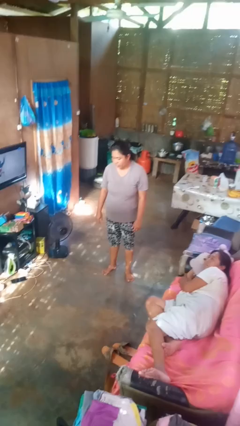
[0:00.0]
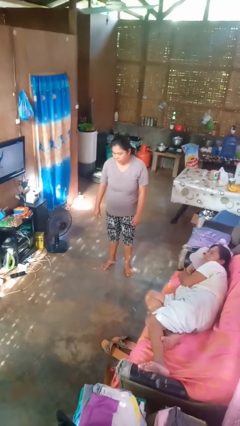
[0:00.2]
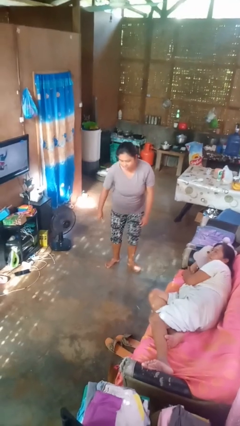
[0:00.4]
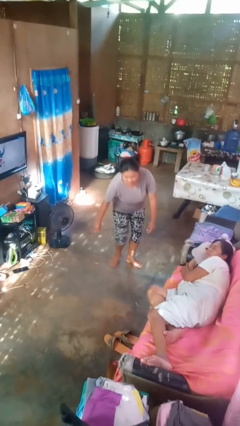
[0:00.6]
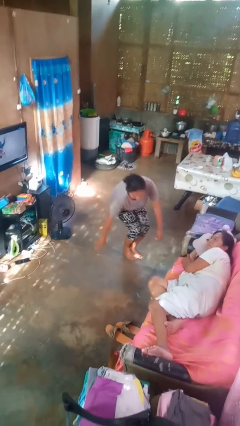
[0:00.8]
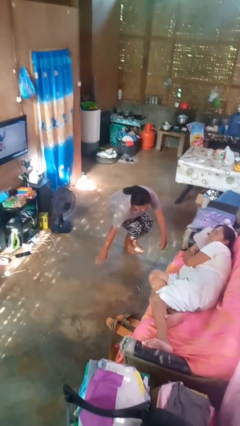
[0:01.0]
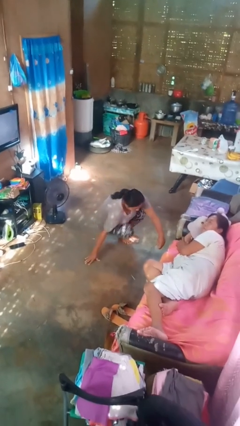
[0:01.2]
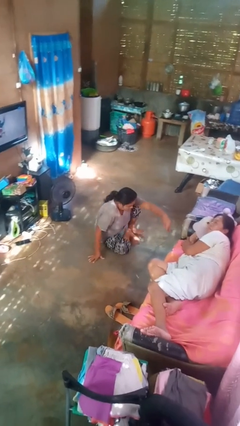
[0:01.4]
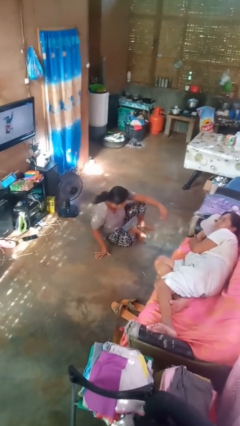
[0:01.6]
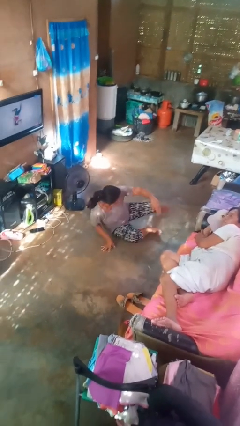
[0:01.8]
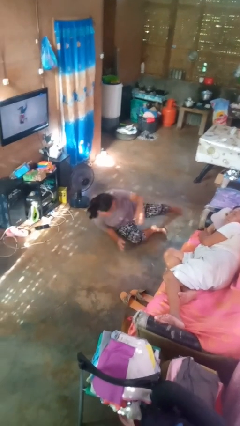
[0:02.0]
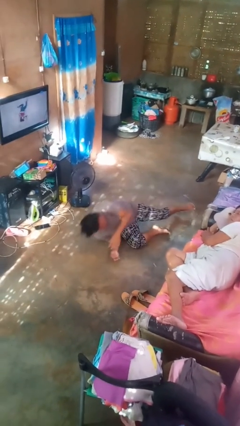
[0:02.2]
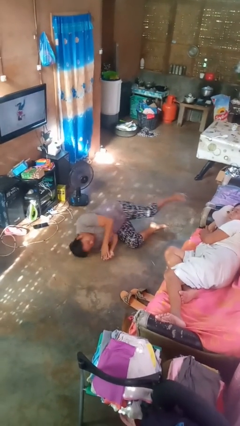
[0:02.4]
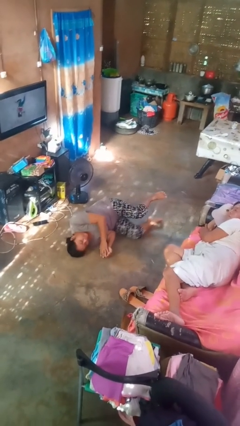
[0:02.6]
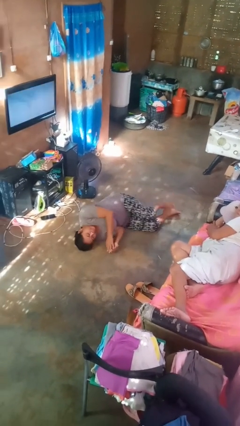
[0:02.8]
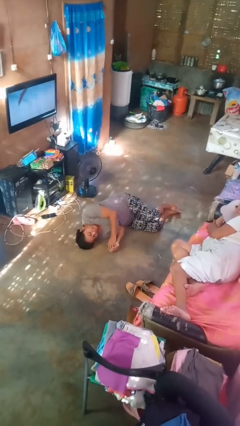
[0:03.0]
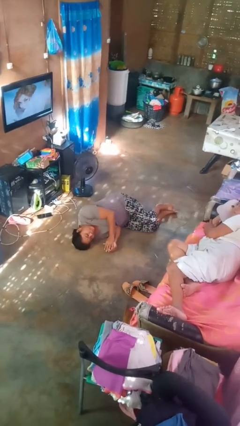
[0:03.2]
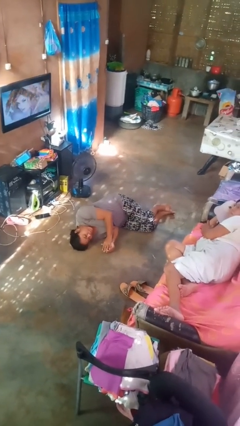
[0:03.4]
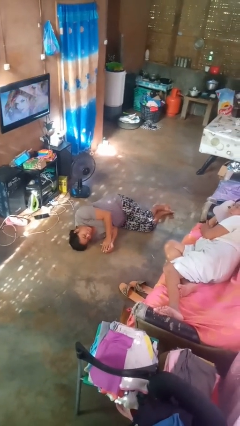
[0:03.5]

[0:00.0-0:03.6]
person falls while standing

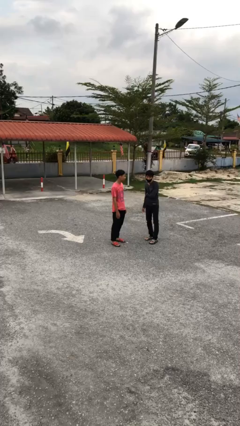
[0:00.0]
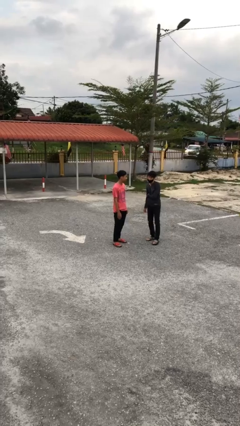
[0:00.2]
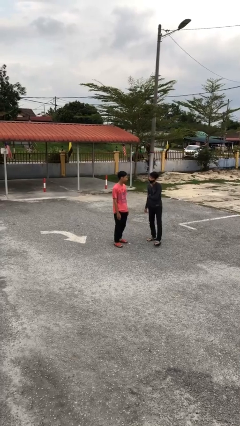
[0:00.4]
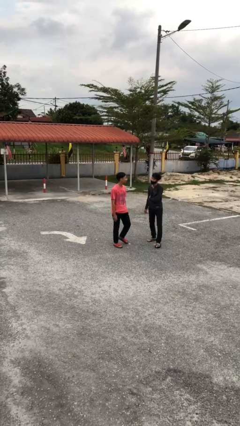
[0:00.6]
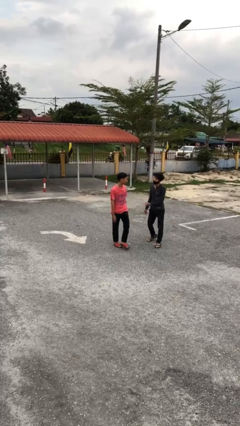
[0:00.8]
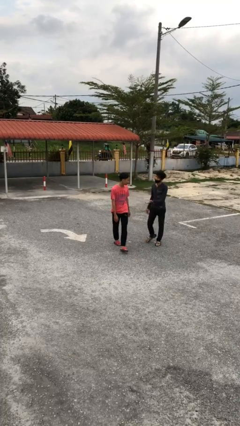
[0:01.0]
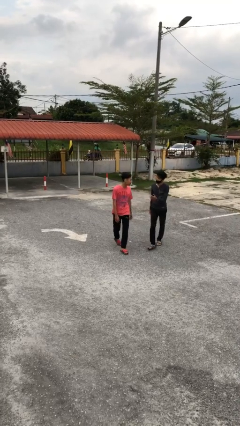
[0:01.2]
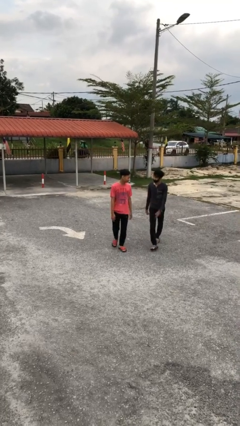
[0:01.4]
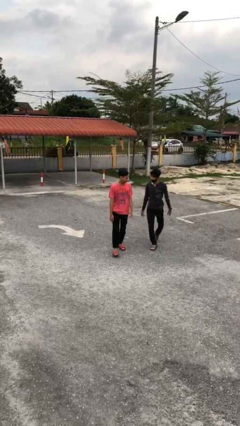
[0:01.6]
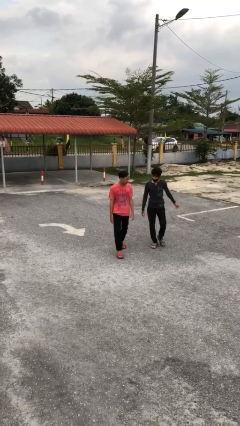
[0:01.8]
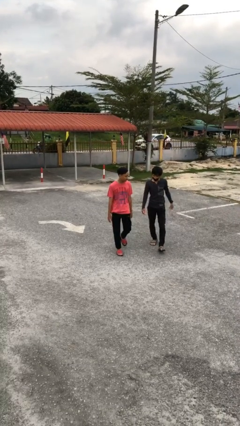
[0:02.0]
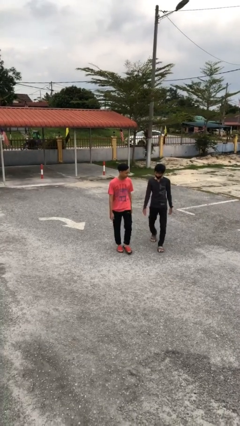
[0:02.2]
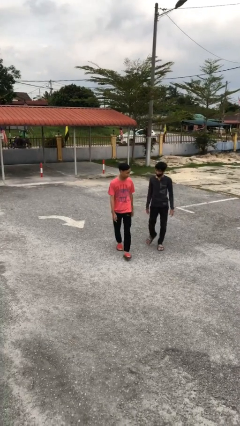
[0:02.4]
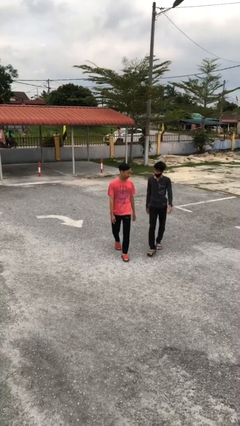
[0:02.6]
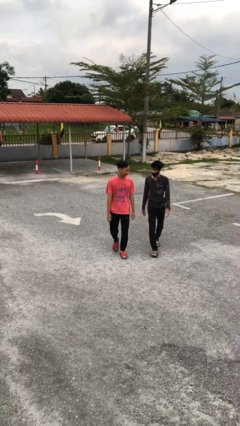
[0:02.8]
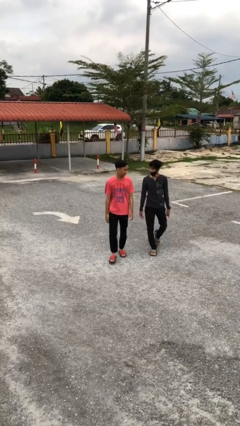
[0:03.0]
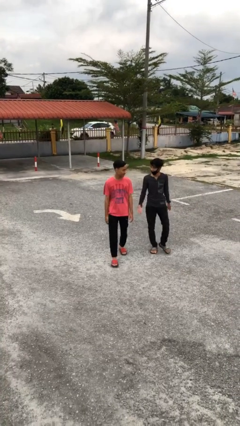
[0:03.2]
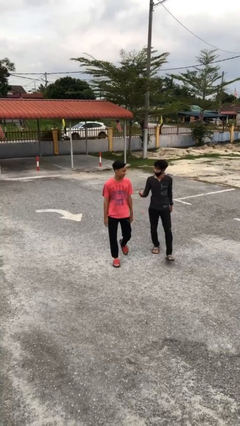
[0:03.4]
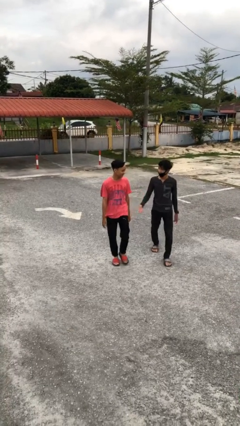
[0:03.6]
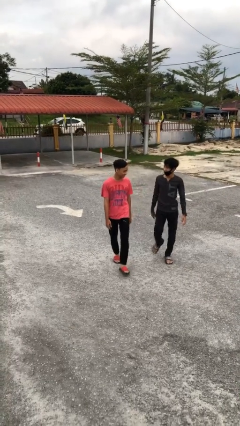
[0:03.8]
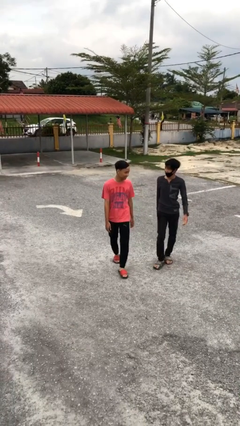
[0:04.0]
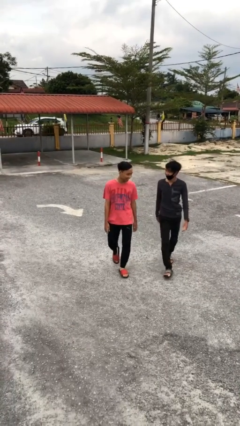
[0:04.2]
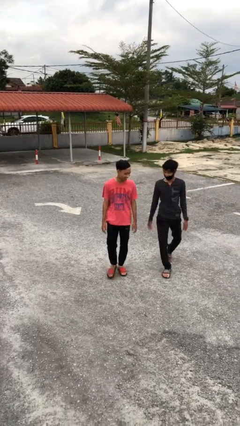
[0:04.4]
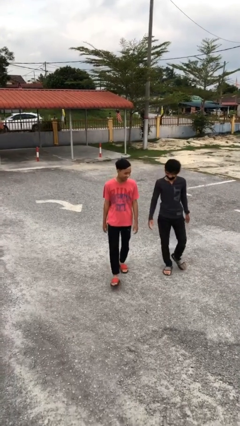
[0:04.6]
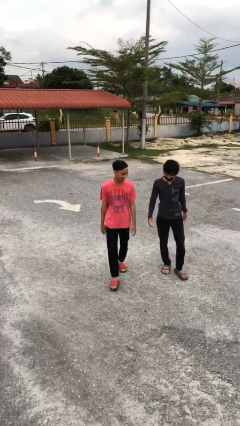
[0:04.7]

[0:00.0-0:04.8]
person talks to person

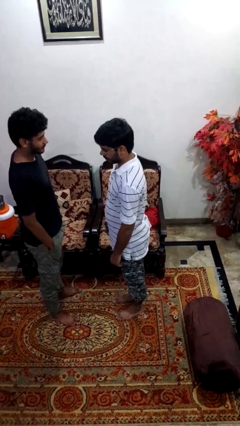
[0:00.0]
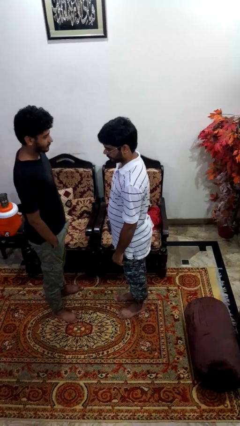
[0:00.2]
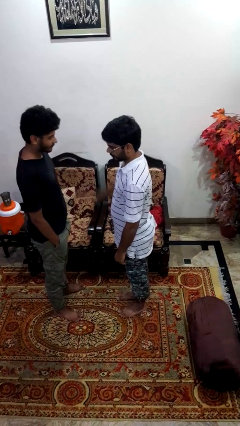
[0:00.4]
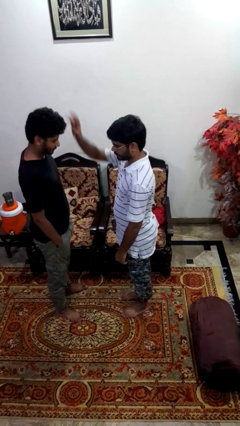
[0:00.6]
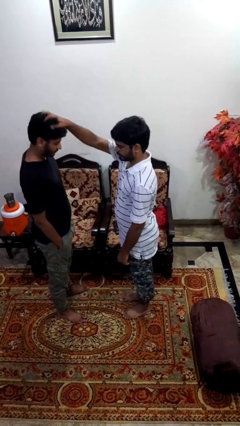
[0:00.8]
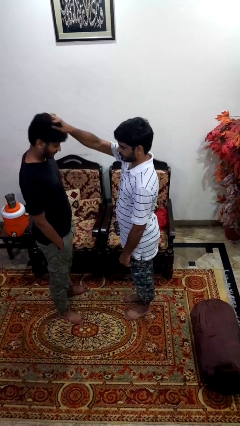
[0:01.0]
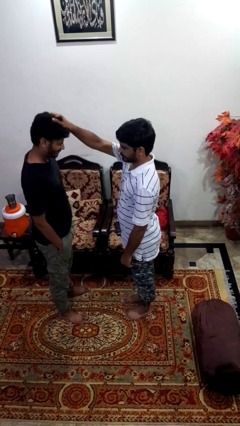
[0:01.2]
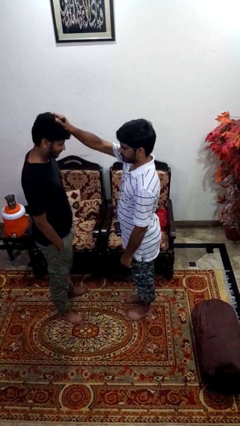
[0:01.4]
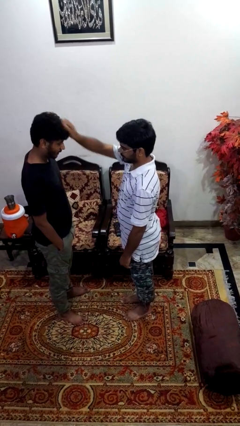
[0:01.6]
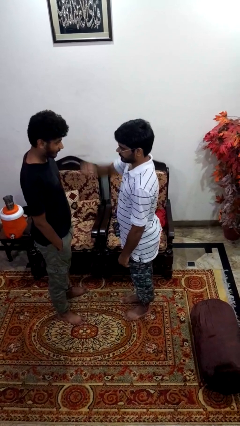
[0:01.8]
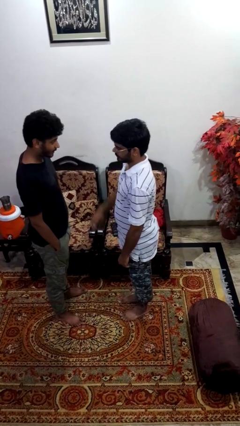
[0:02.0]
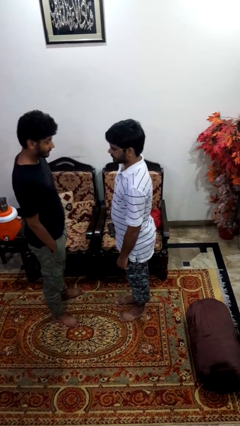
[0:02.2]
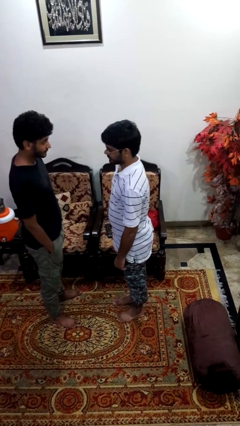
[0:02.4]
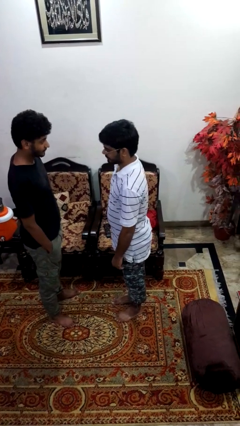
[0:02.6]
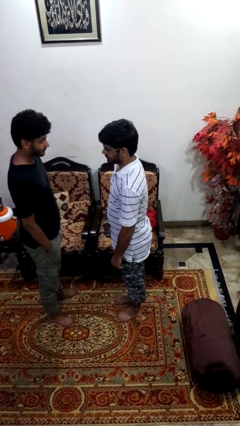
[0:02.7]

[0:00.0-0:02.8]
person grabs person by hair

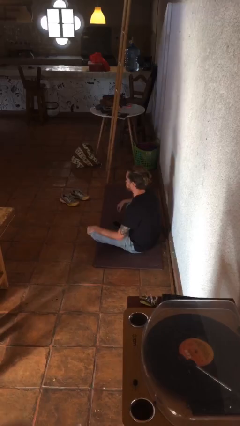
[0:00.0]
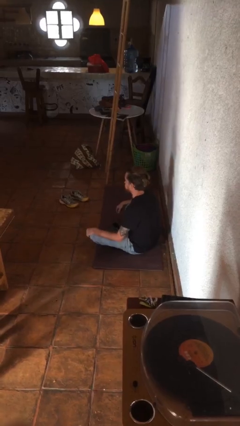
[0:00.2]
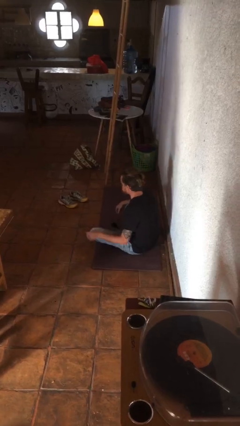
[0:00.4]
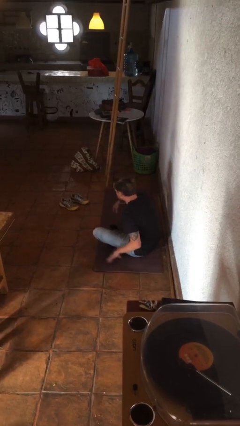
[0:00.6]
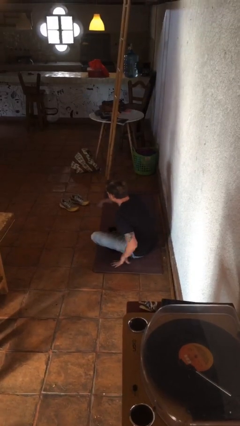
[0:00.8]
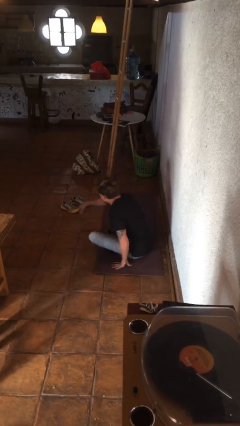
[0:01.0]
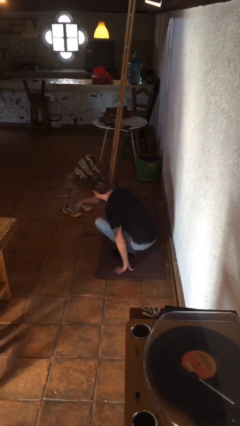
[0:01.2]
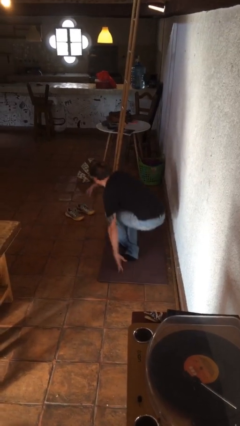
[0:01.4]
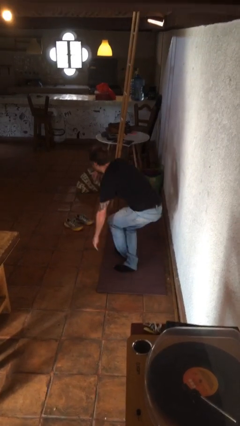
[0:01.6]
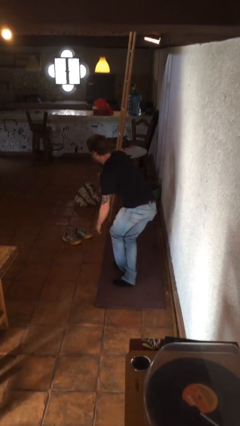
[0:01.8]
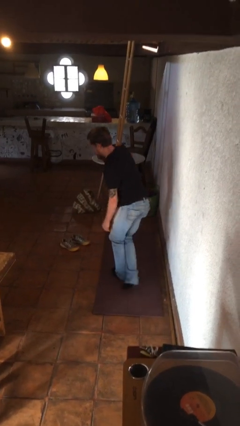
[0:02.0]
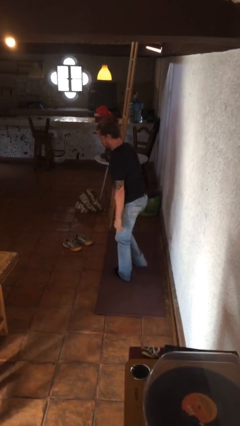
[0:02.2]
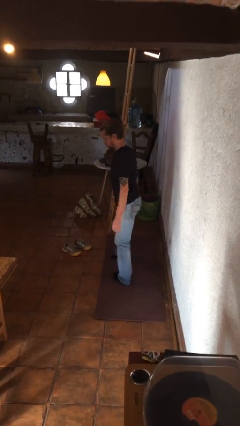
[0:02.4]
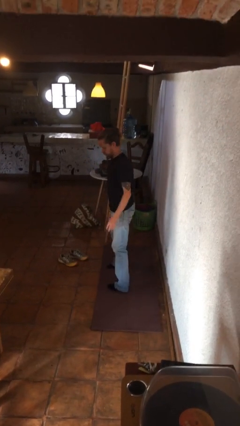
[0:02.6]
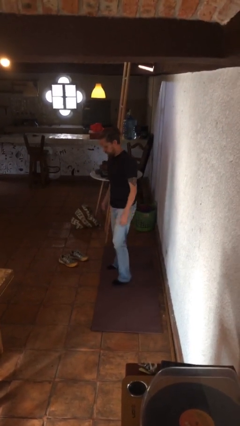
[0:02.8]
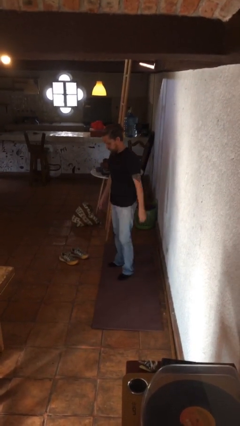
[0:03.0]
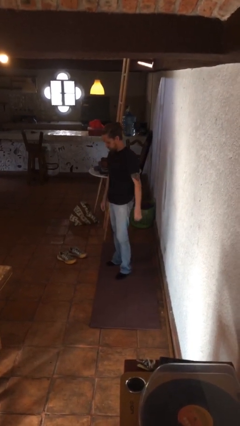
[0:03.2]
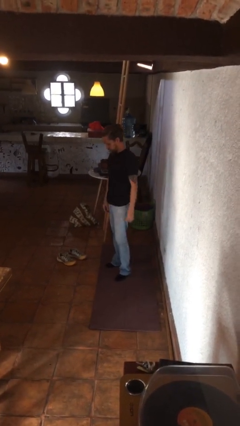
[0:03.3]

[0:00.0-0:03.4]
person stands up from floor

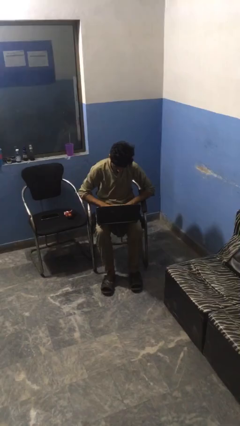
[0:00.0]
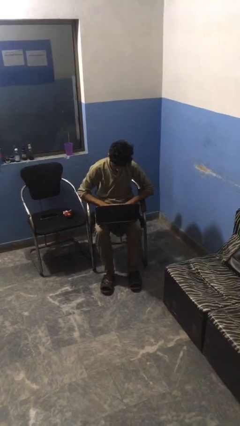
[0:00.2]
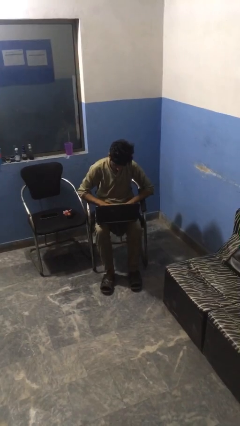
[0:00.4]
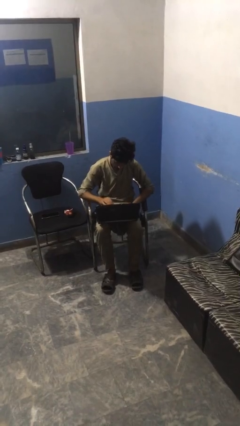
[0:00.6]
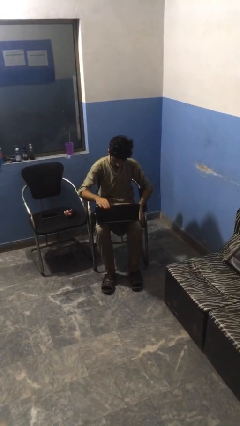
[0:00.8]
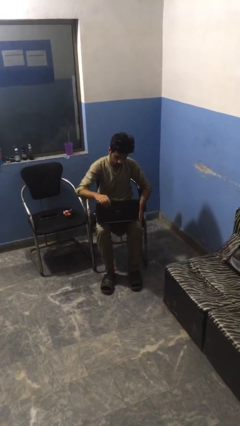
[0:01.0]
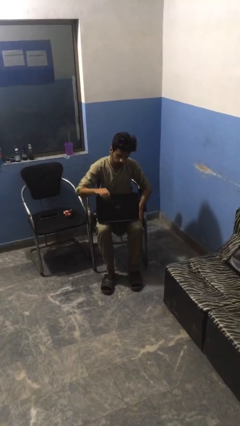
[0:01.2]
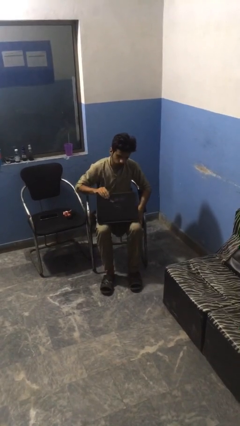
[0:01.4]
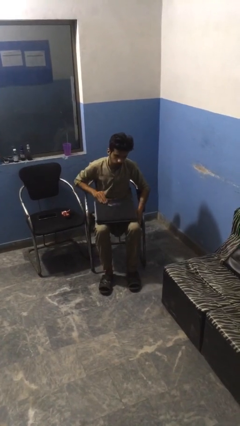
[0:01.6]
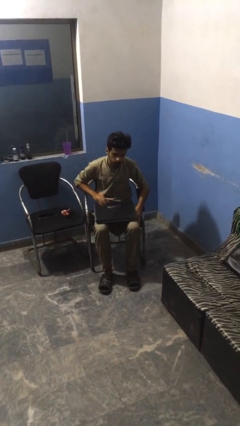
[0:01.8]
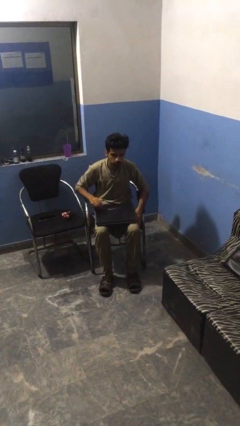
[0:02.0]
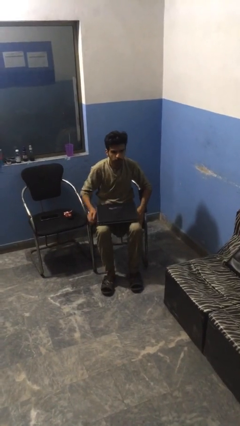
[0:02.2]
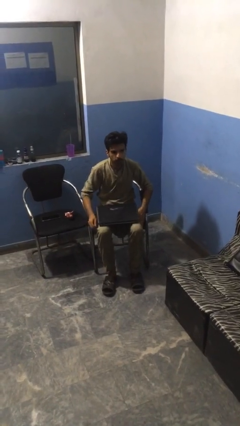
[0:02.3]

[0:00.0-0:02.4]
person closes laptop

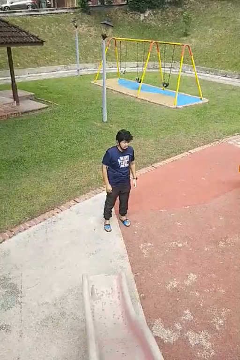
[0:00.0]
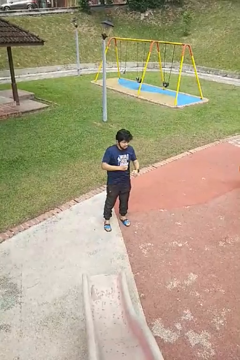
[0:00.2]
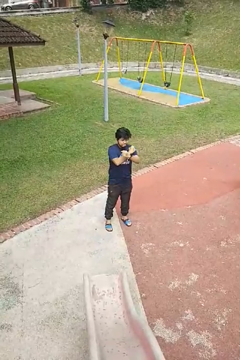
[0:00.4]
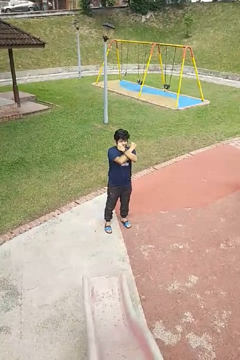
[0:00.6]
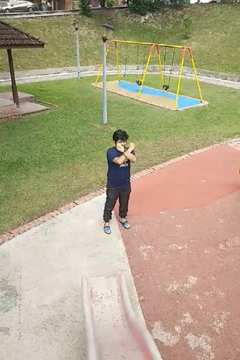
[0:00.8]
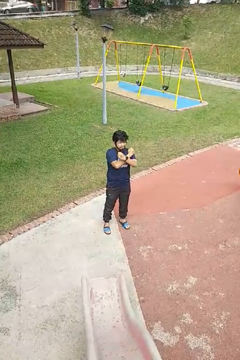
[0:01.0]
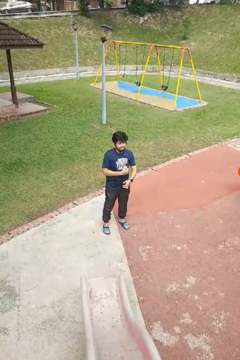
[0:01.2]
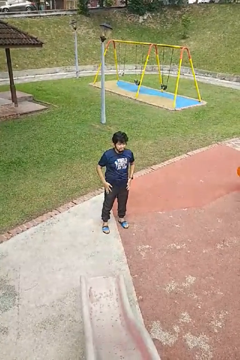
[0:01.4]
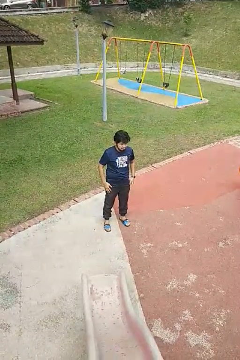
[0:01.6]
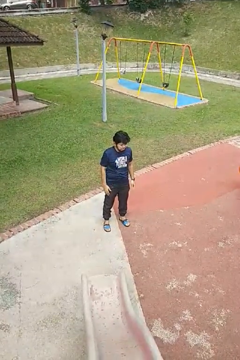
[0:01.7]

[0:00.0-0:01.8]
person gestures arms x